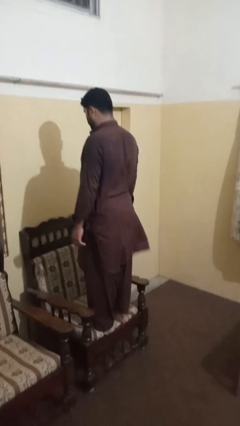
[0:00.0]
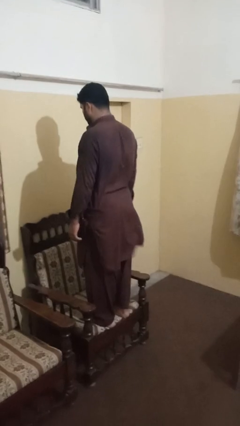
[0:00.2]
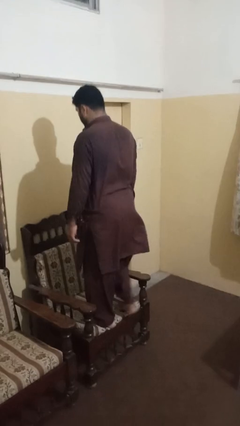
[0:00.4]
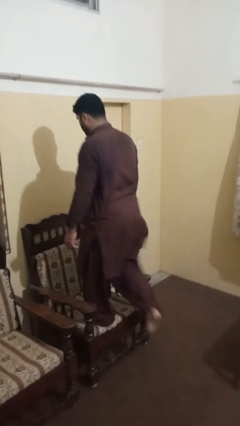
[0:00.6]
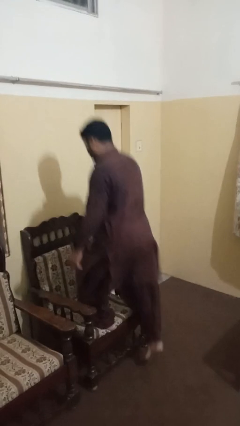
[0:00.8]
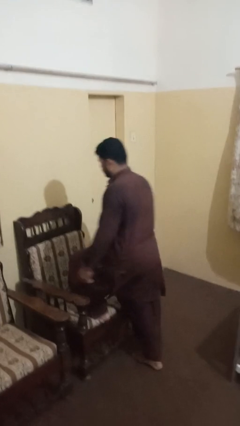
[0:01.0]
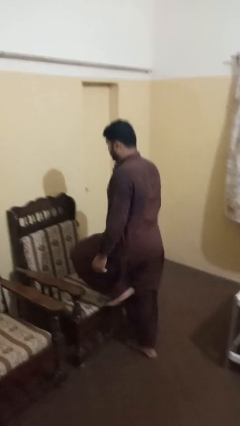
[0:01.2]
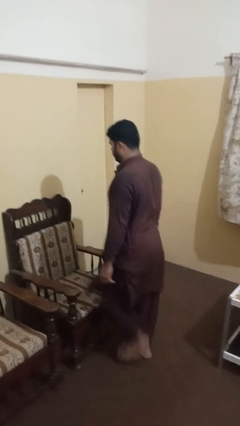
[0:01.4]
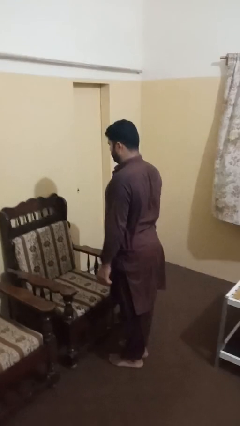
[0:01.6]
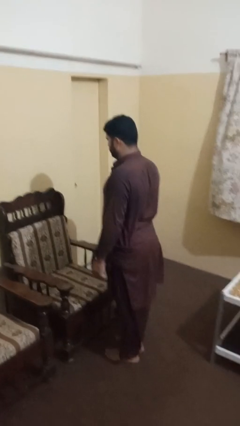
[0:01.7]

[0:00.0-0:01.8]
person climbs off chair

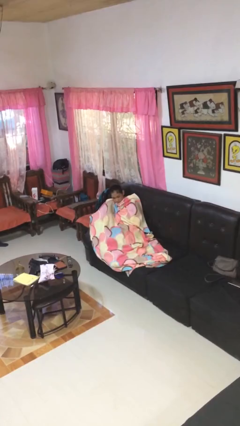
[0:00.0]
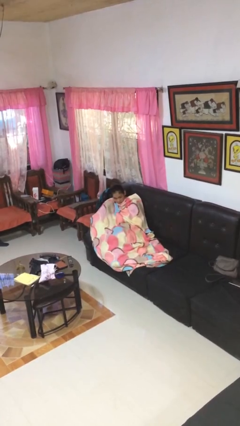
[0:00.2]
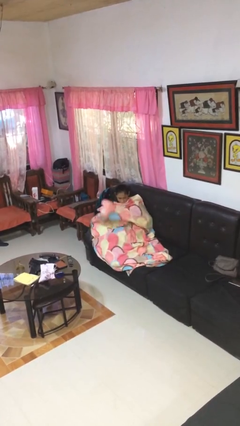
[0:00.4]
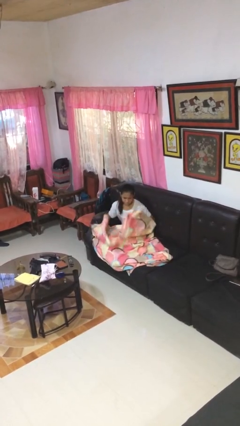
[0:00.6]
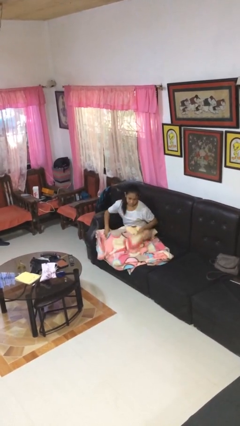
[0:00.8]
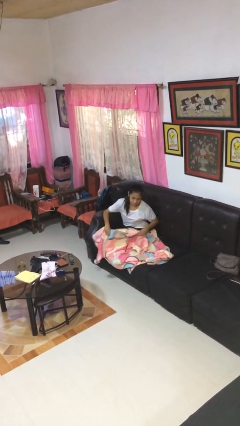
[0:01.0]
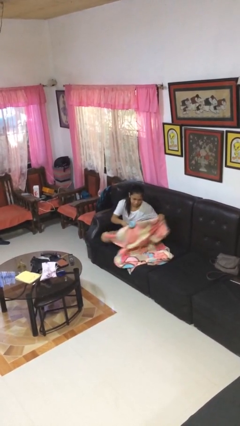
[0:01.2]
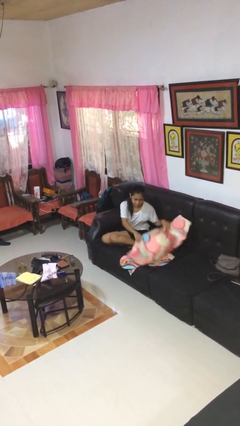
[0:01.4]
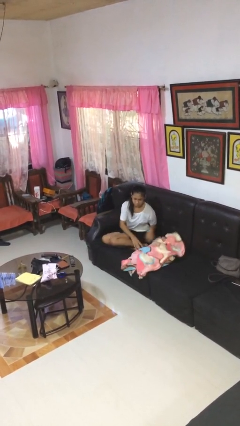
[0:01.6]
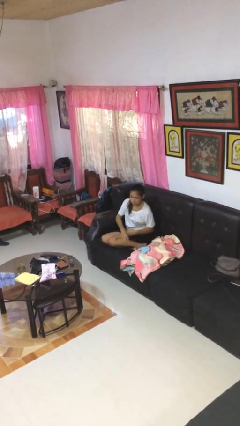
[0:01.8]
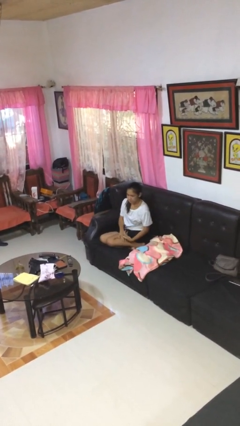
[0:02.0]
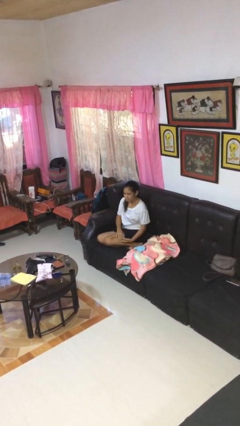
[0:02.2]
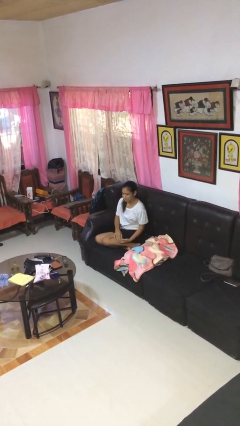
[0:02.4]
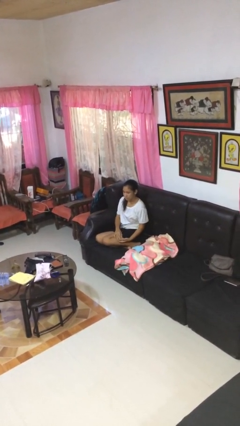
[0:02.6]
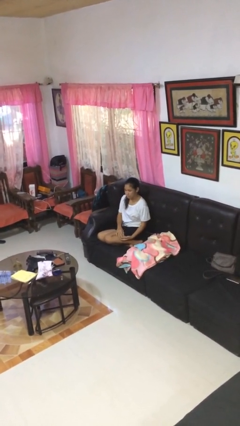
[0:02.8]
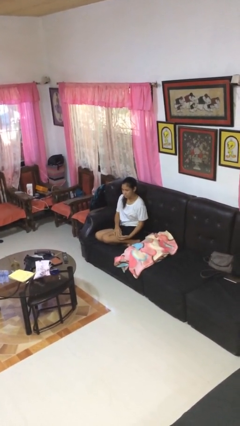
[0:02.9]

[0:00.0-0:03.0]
person uncovers with blanket

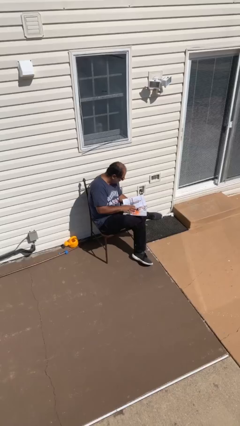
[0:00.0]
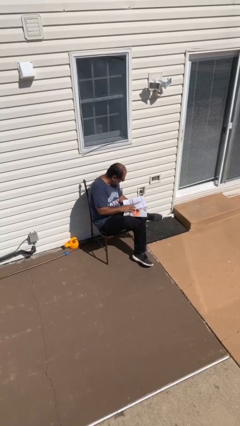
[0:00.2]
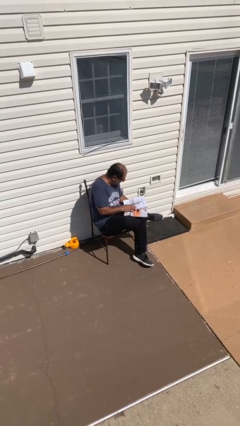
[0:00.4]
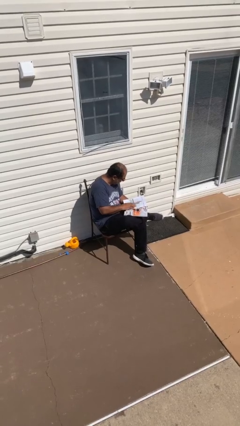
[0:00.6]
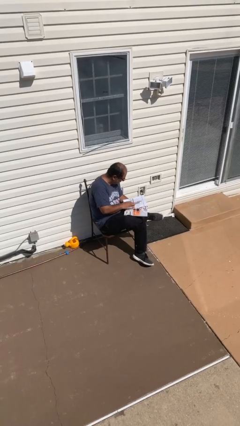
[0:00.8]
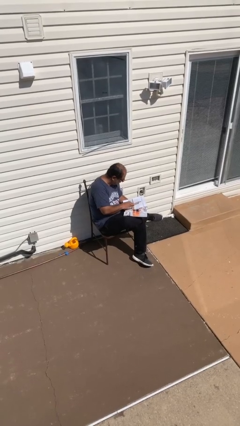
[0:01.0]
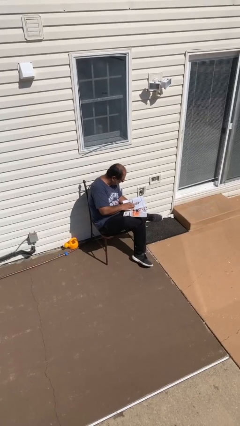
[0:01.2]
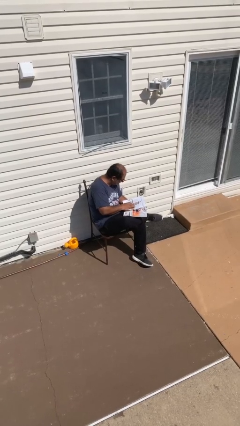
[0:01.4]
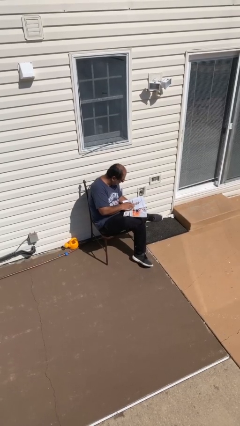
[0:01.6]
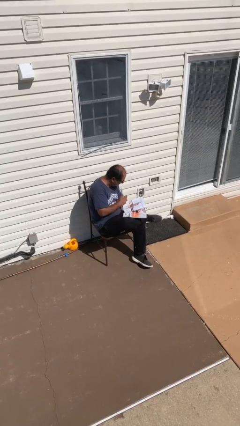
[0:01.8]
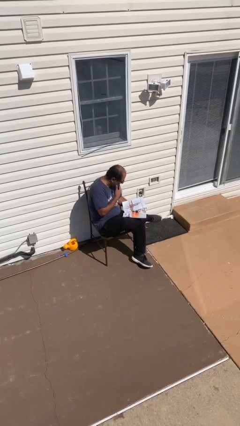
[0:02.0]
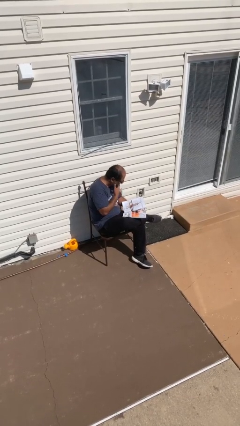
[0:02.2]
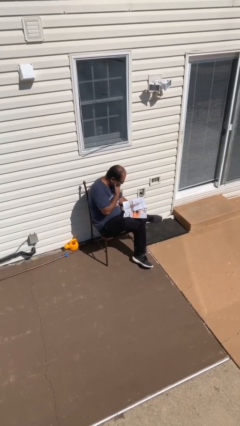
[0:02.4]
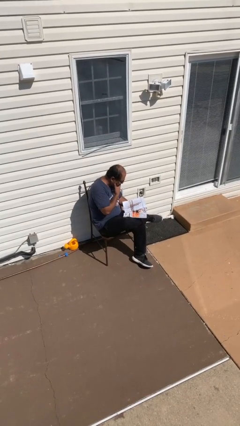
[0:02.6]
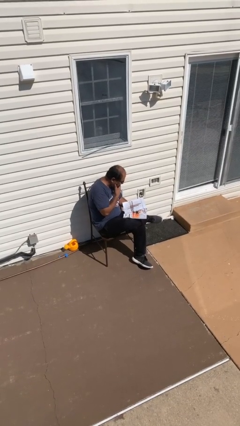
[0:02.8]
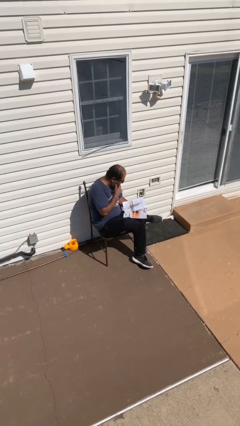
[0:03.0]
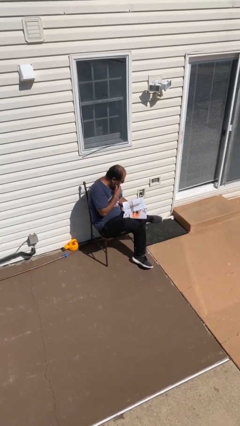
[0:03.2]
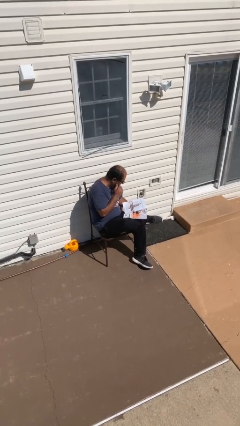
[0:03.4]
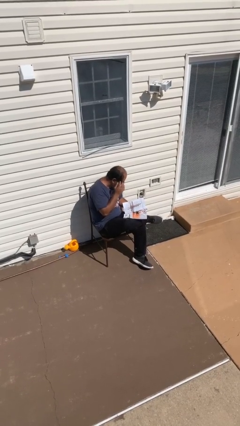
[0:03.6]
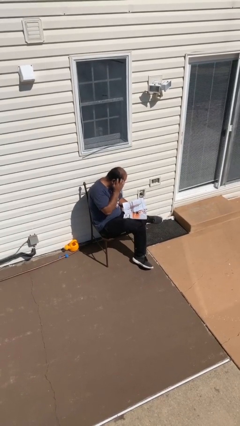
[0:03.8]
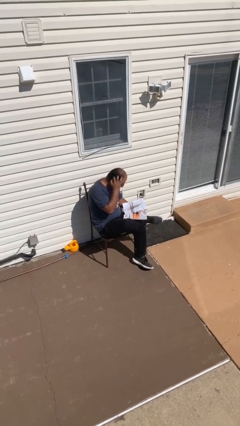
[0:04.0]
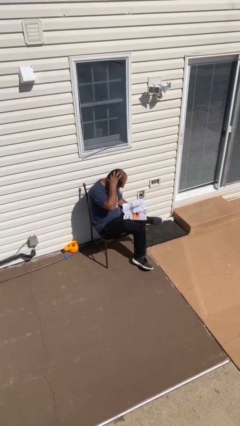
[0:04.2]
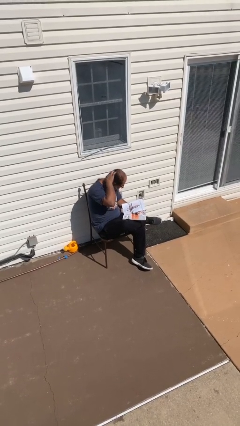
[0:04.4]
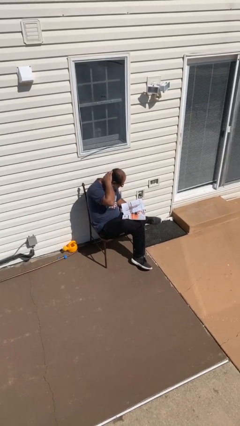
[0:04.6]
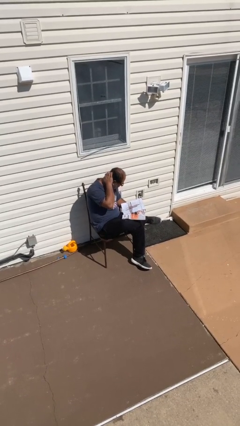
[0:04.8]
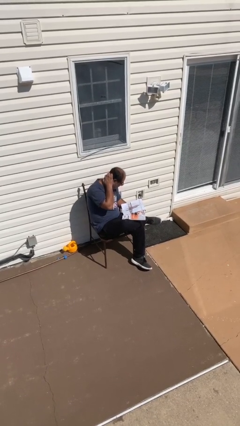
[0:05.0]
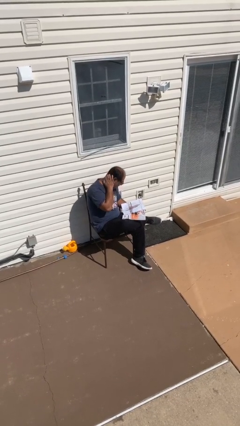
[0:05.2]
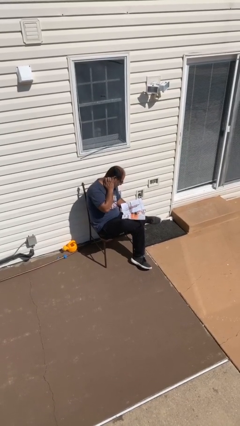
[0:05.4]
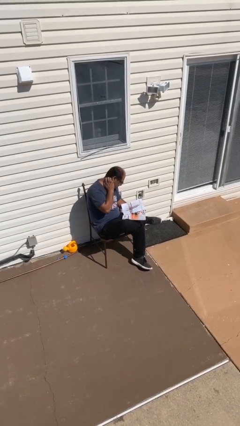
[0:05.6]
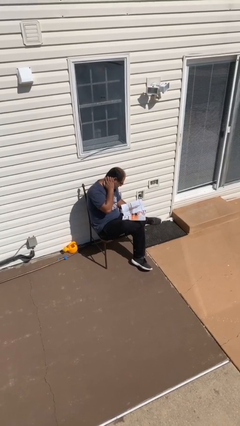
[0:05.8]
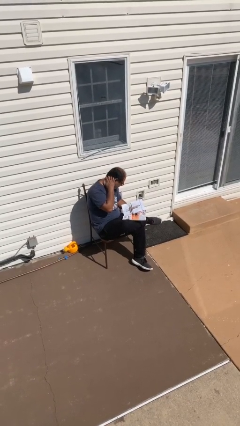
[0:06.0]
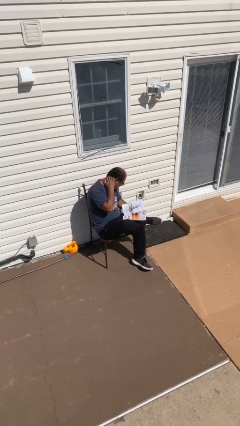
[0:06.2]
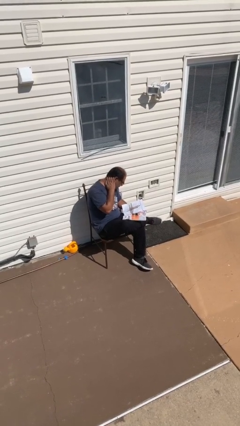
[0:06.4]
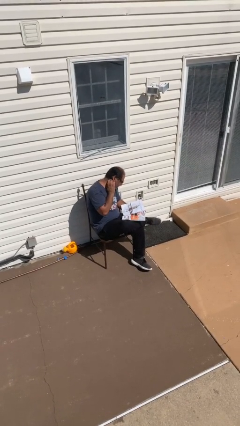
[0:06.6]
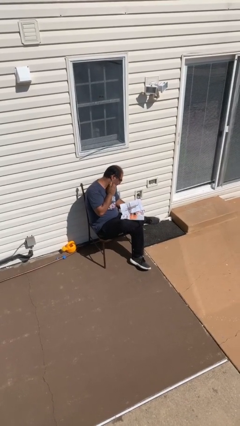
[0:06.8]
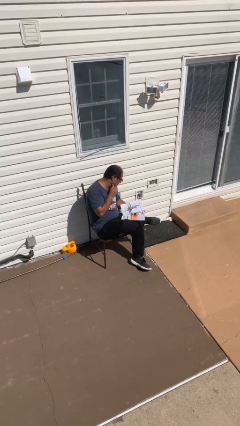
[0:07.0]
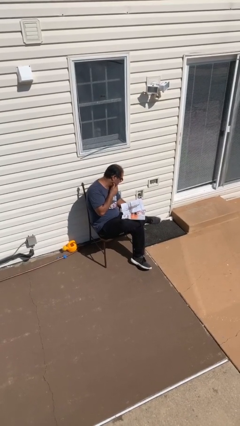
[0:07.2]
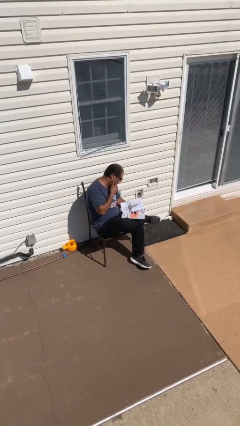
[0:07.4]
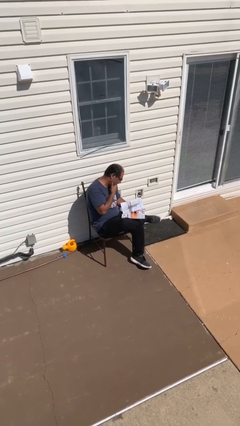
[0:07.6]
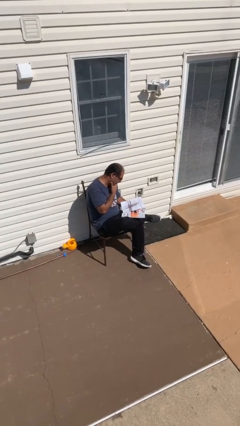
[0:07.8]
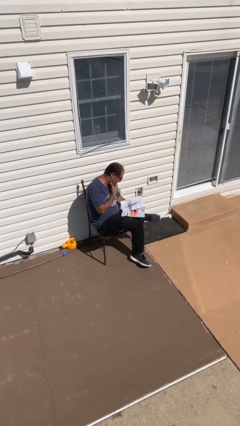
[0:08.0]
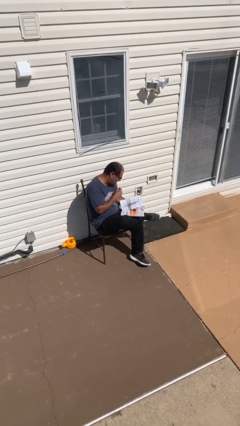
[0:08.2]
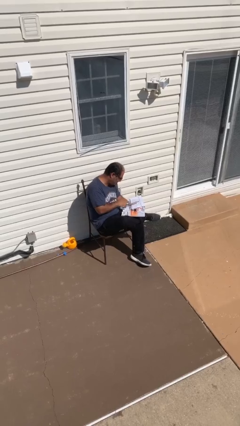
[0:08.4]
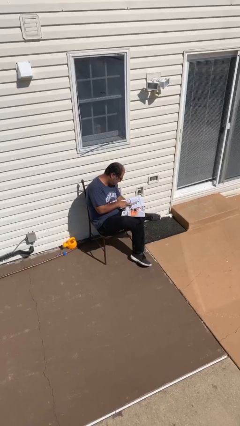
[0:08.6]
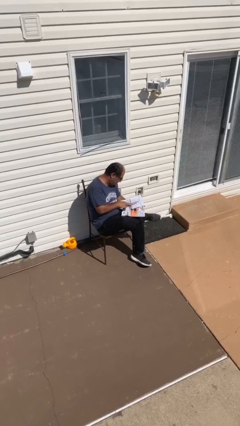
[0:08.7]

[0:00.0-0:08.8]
person reads document

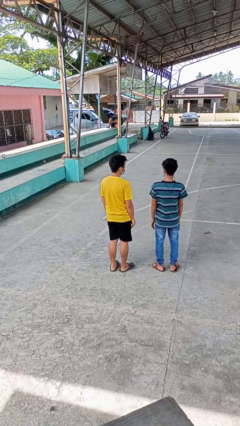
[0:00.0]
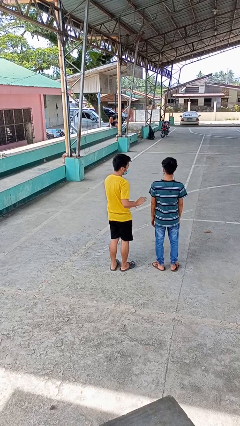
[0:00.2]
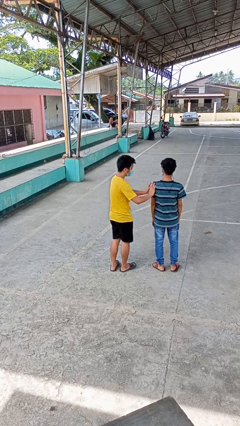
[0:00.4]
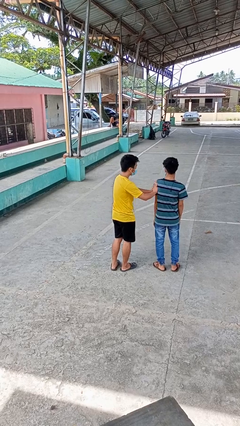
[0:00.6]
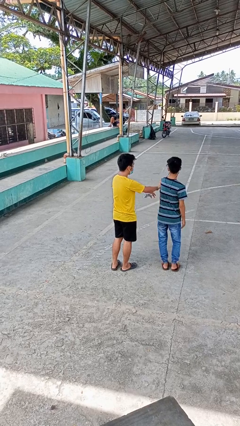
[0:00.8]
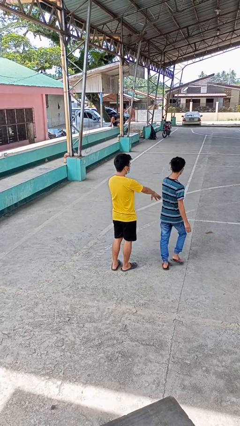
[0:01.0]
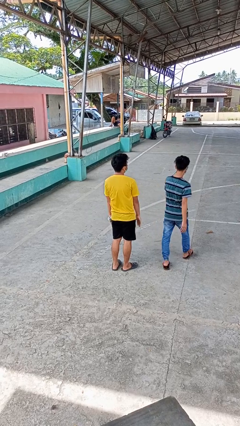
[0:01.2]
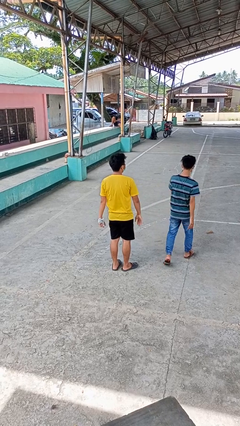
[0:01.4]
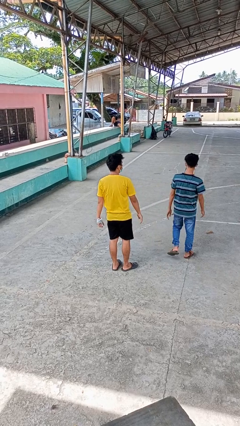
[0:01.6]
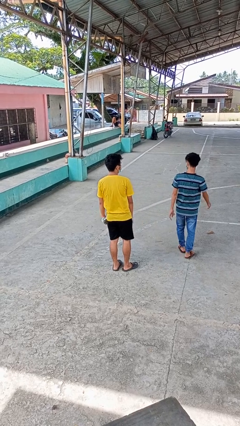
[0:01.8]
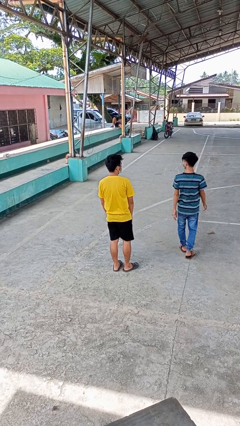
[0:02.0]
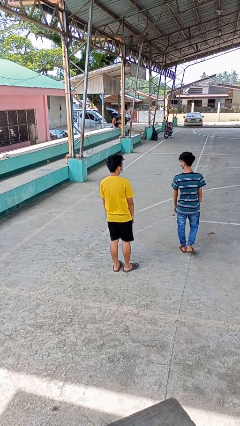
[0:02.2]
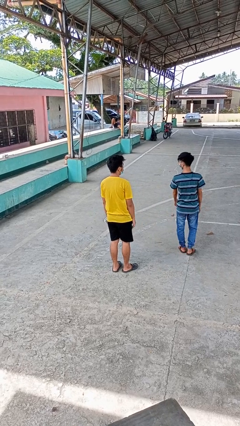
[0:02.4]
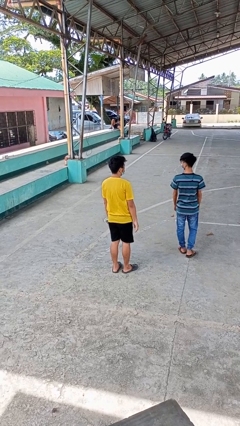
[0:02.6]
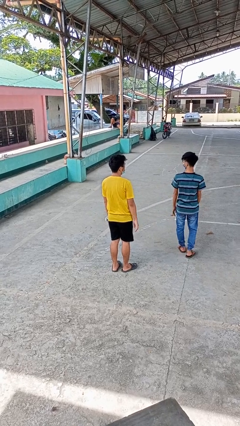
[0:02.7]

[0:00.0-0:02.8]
person shoves person

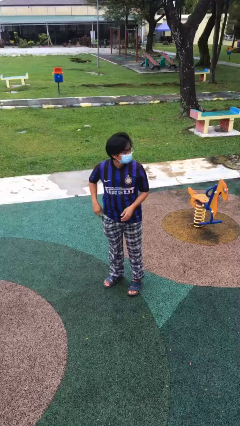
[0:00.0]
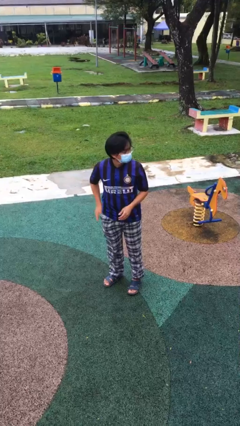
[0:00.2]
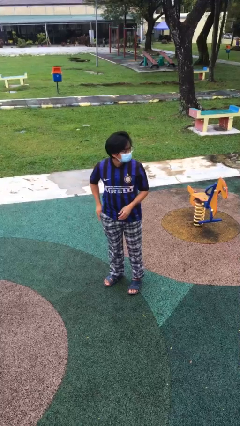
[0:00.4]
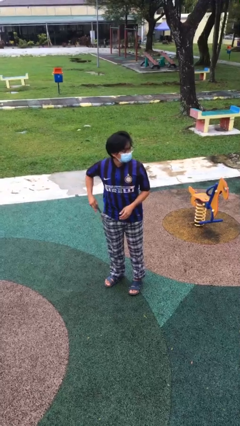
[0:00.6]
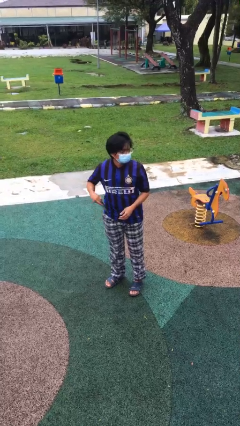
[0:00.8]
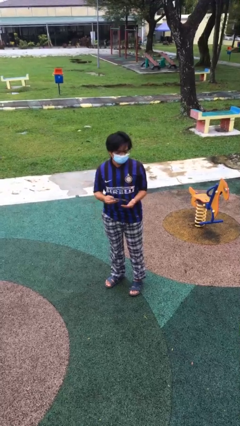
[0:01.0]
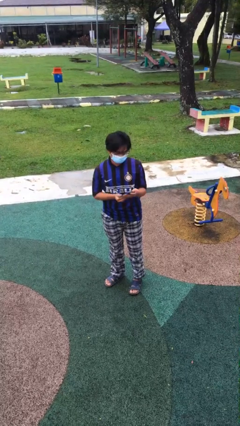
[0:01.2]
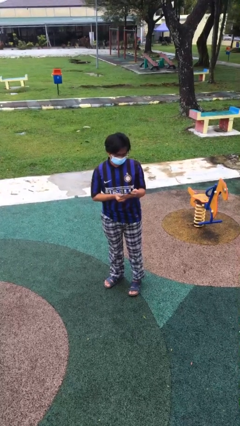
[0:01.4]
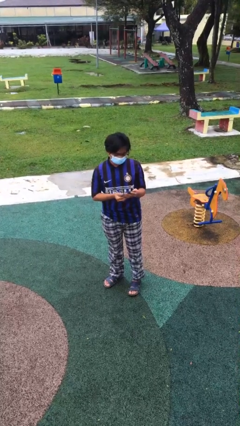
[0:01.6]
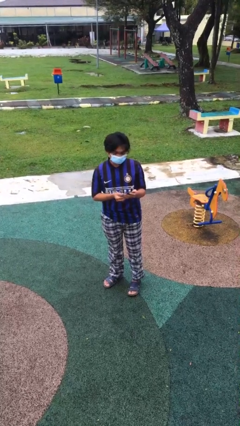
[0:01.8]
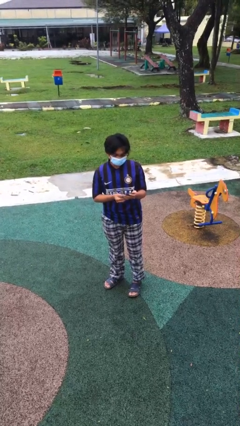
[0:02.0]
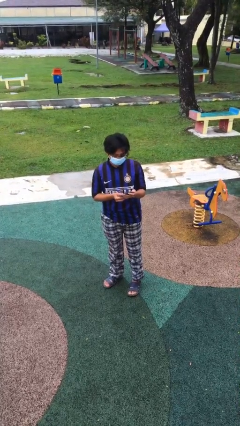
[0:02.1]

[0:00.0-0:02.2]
person takes phone from pocket
